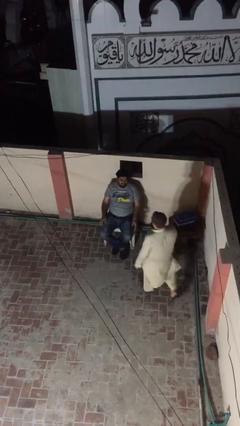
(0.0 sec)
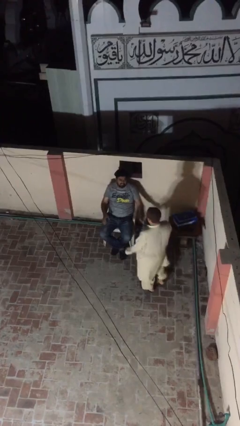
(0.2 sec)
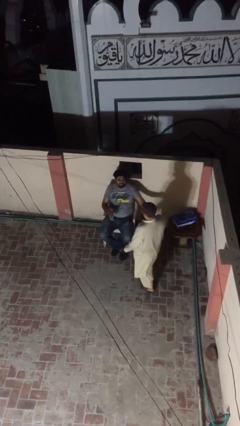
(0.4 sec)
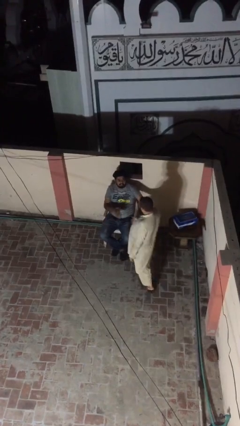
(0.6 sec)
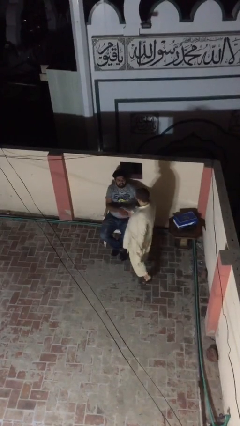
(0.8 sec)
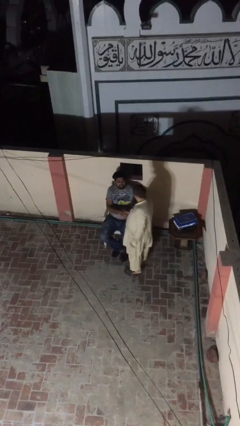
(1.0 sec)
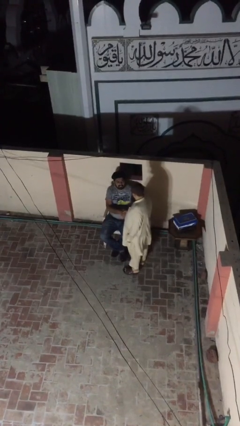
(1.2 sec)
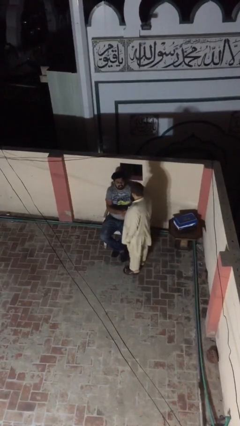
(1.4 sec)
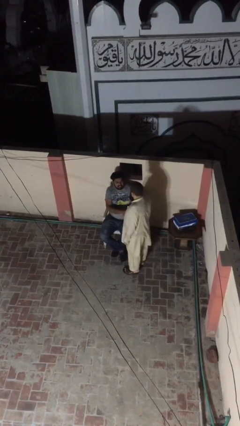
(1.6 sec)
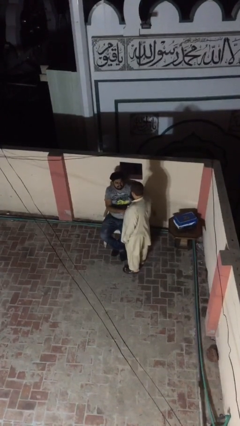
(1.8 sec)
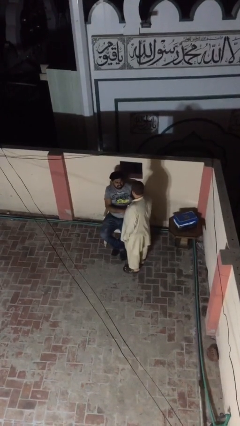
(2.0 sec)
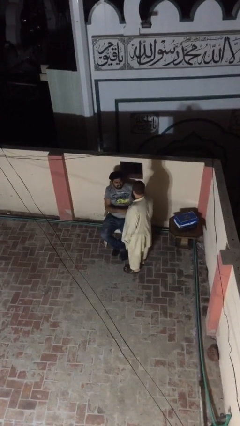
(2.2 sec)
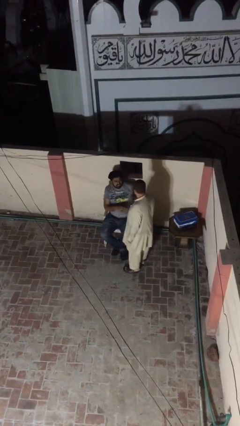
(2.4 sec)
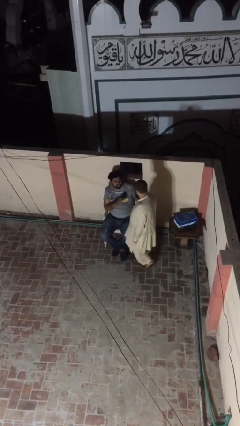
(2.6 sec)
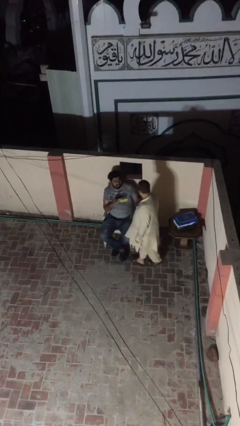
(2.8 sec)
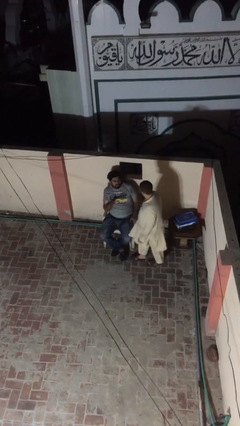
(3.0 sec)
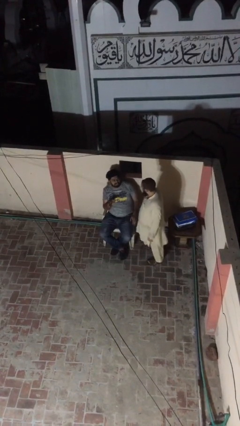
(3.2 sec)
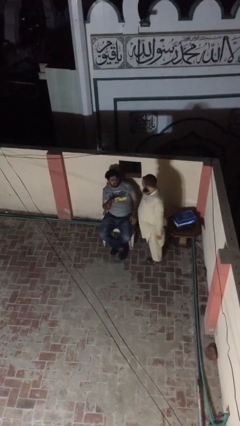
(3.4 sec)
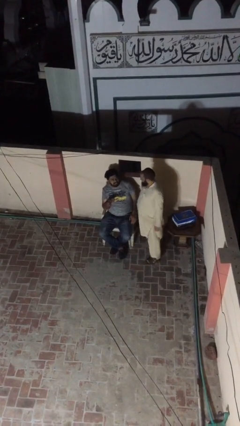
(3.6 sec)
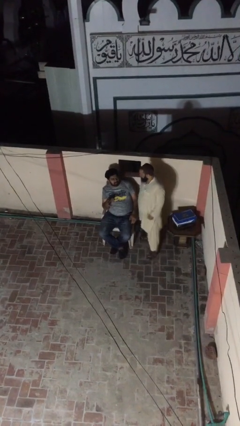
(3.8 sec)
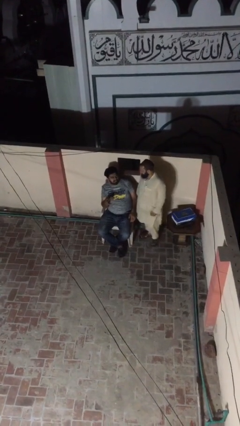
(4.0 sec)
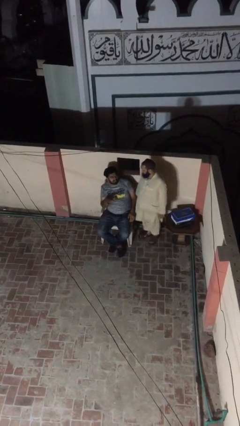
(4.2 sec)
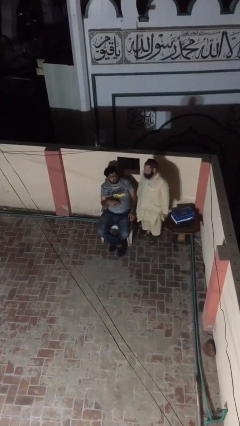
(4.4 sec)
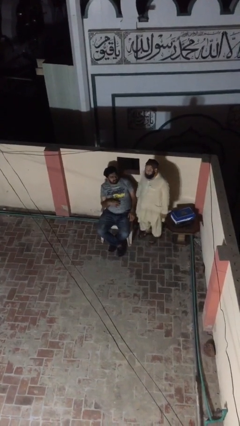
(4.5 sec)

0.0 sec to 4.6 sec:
person shakes hand

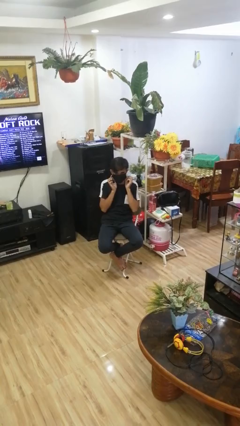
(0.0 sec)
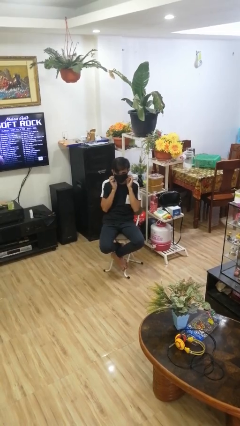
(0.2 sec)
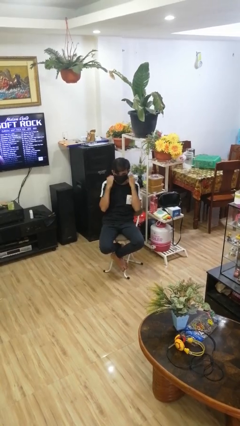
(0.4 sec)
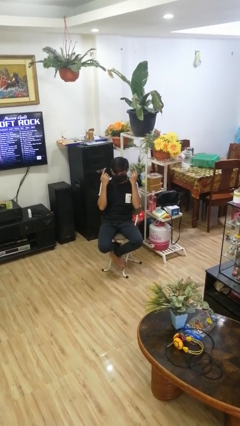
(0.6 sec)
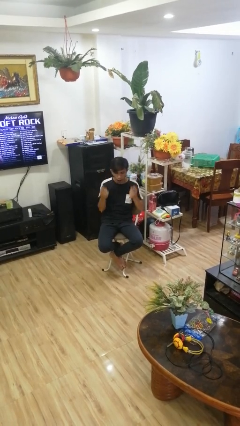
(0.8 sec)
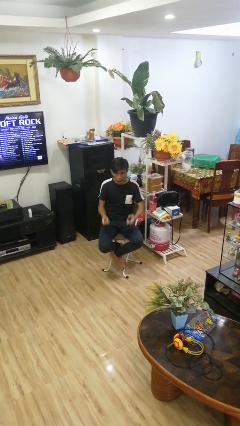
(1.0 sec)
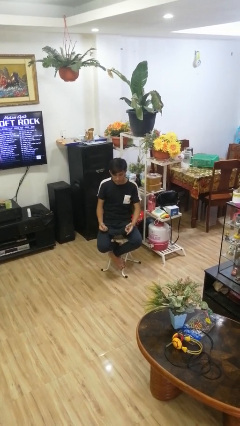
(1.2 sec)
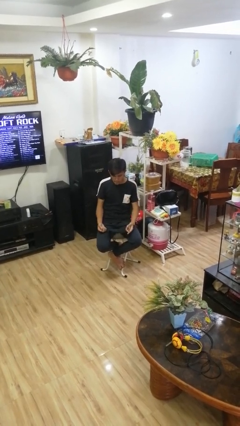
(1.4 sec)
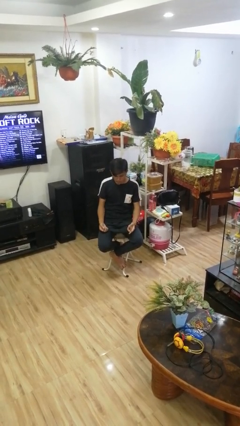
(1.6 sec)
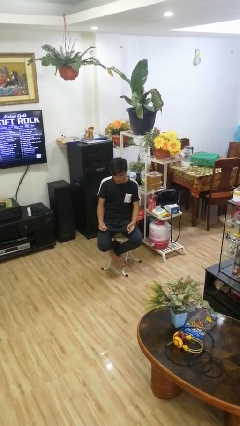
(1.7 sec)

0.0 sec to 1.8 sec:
person takes off facemask

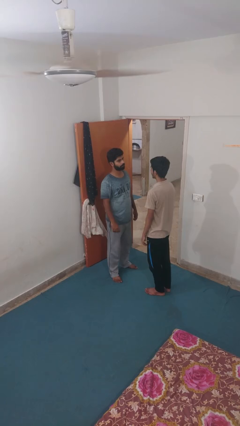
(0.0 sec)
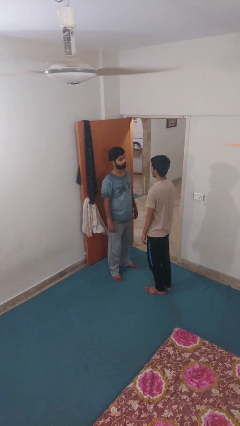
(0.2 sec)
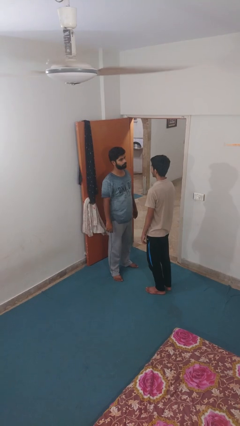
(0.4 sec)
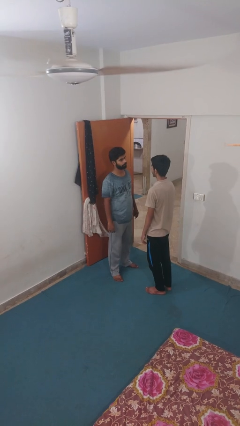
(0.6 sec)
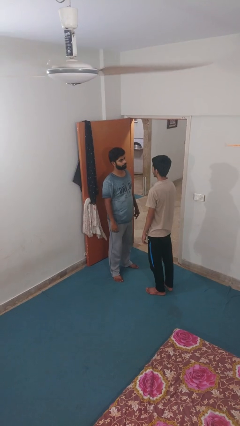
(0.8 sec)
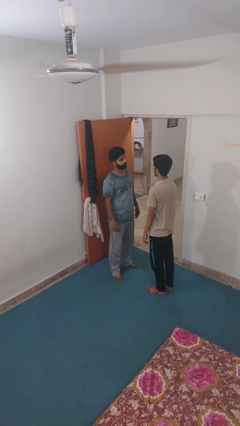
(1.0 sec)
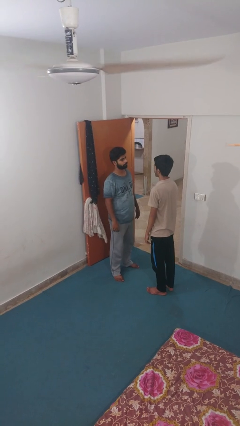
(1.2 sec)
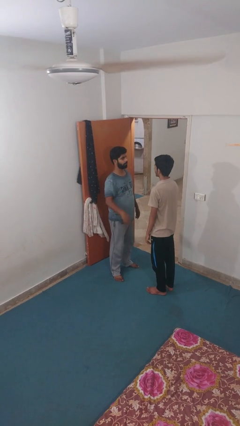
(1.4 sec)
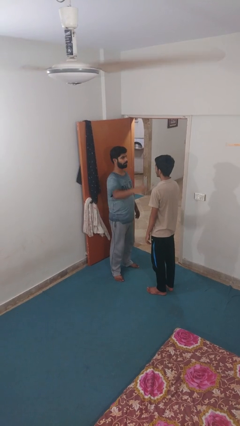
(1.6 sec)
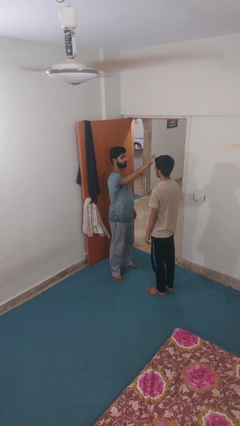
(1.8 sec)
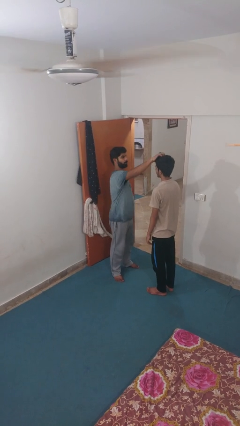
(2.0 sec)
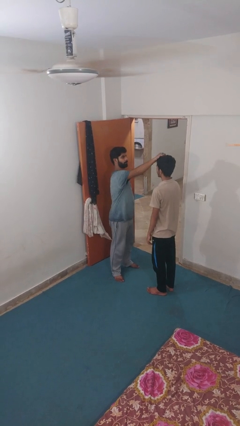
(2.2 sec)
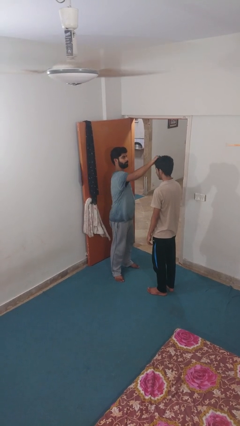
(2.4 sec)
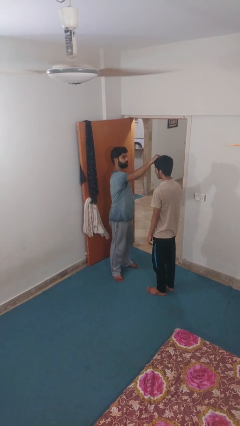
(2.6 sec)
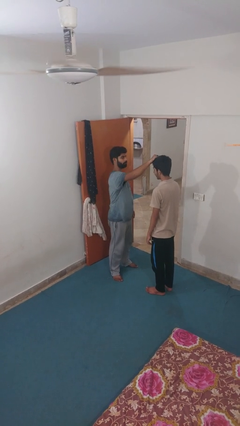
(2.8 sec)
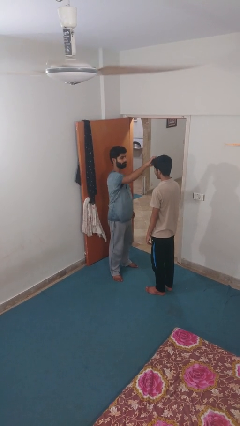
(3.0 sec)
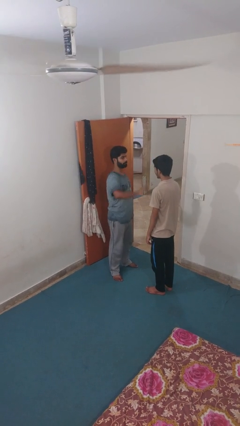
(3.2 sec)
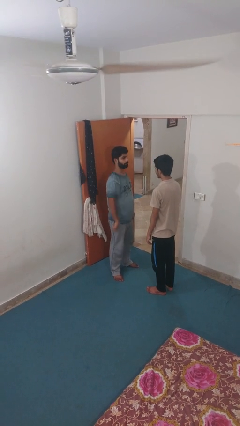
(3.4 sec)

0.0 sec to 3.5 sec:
person grabs person by hair

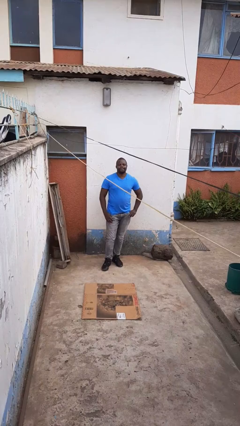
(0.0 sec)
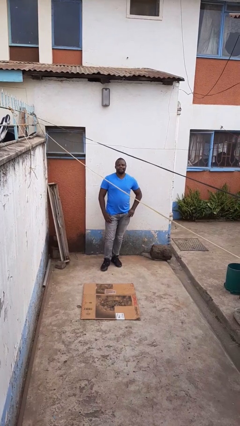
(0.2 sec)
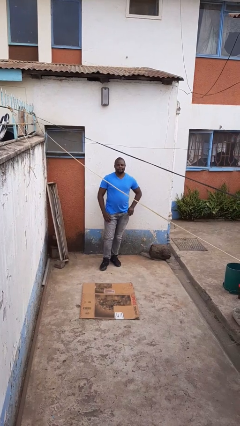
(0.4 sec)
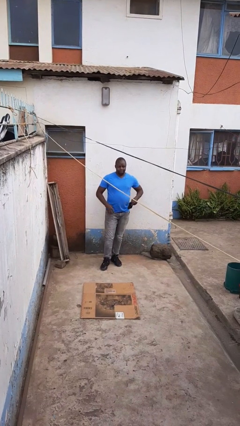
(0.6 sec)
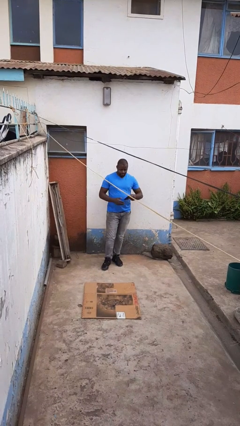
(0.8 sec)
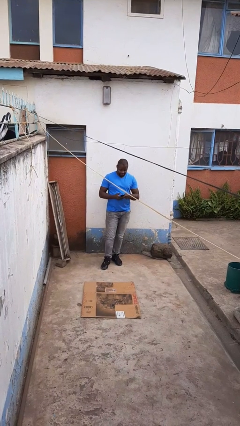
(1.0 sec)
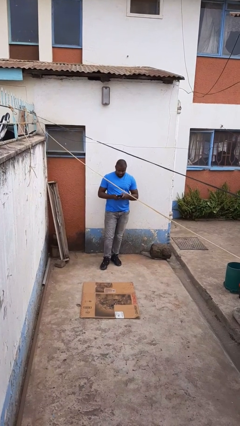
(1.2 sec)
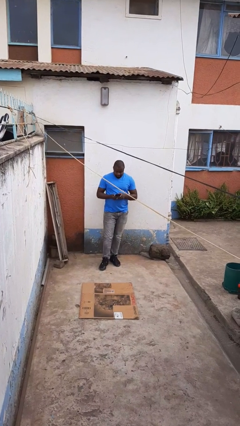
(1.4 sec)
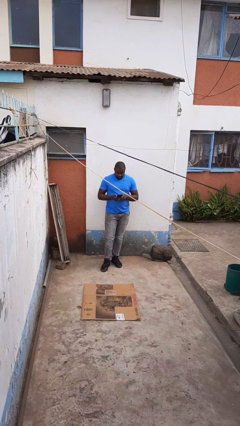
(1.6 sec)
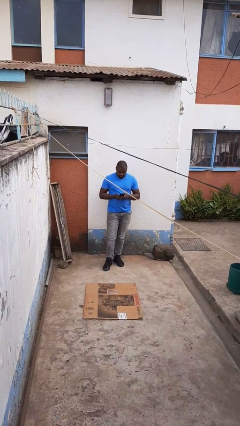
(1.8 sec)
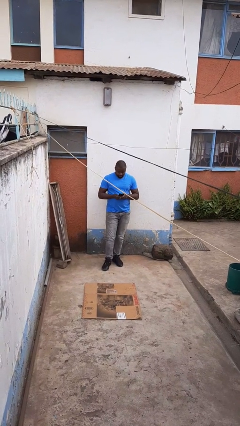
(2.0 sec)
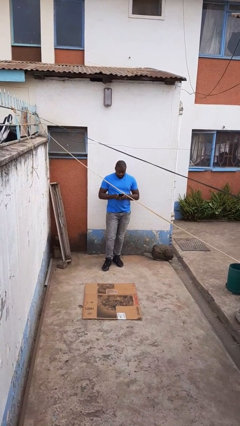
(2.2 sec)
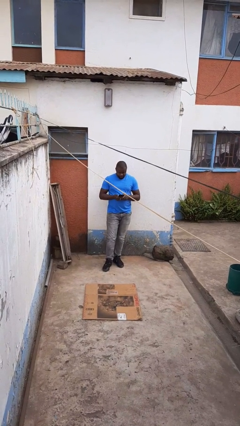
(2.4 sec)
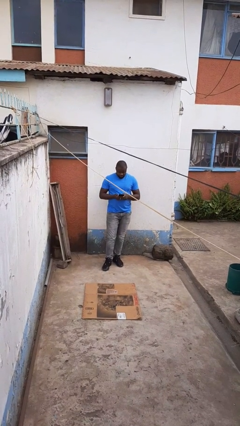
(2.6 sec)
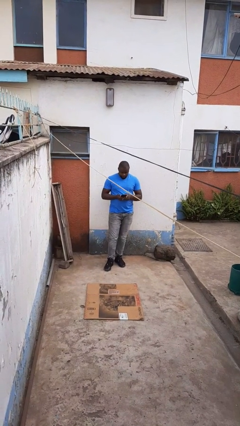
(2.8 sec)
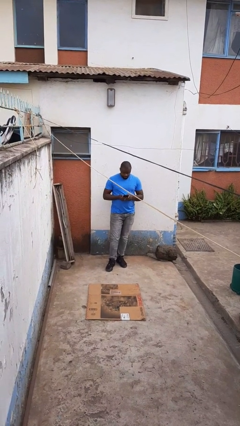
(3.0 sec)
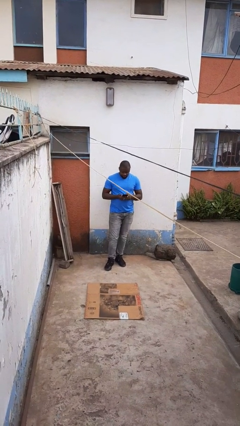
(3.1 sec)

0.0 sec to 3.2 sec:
person takes phone from pocket

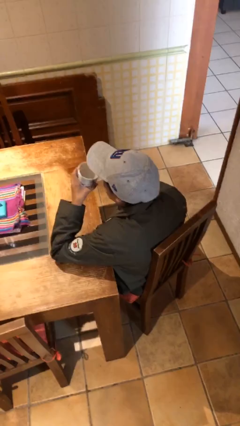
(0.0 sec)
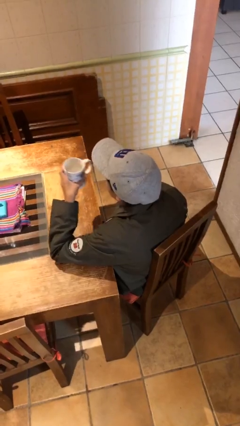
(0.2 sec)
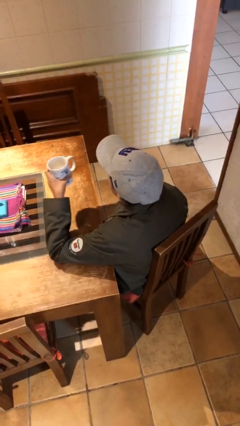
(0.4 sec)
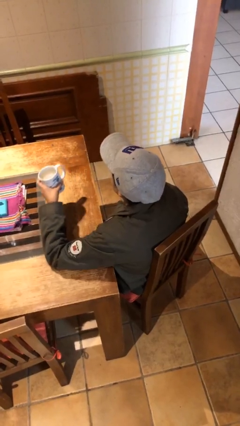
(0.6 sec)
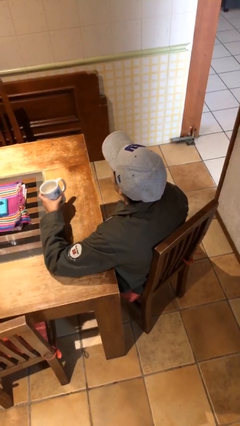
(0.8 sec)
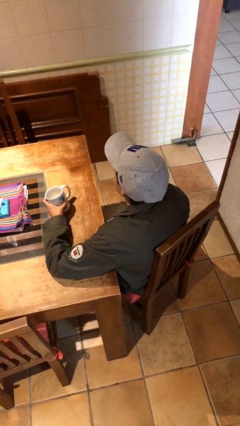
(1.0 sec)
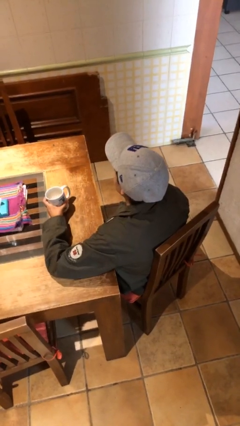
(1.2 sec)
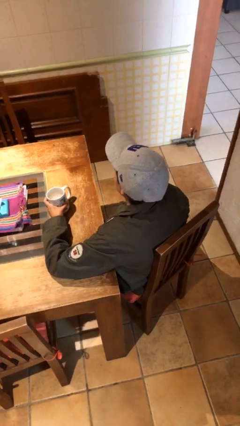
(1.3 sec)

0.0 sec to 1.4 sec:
person puts down object on table

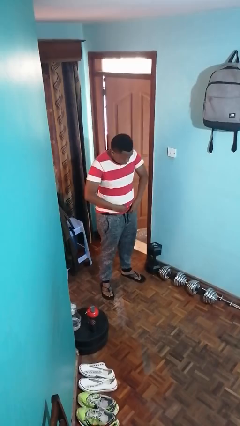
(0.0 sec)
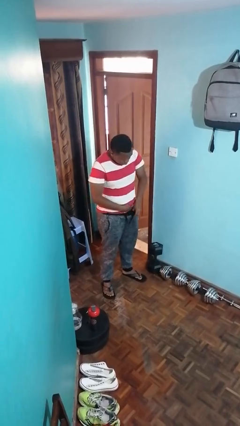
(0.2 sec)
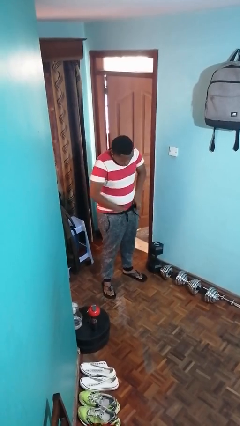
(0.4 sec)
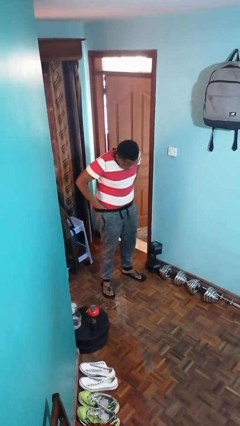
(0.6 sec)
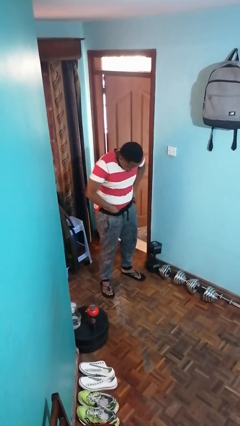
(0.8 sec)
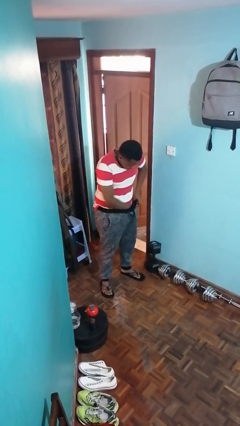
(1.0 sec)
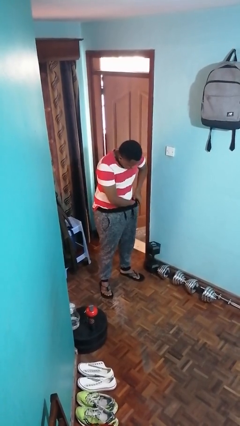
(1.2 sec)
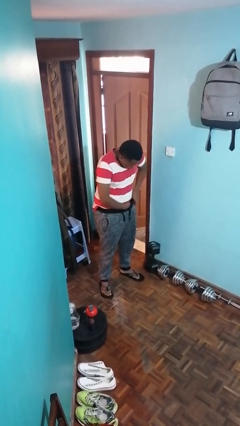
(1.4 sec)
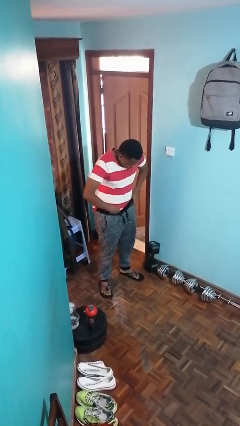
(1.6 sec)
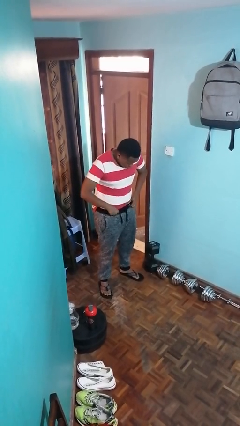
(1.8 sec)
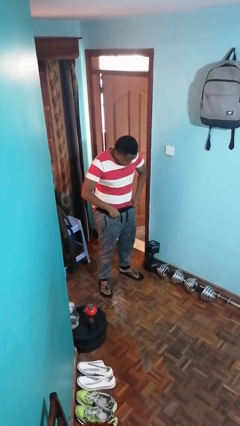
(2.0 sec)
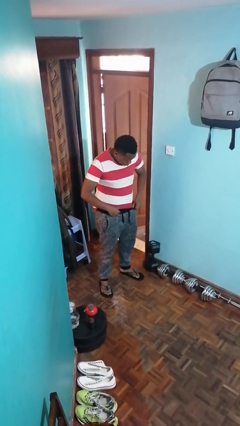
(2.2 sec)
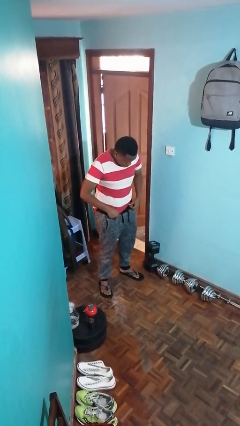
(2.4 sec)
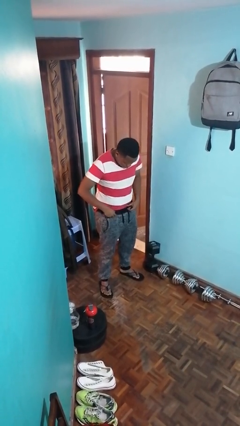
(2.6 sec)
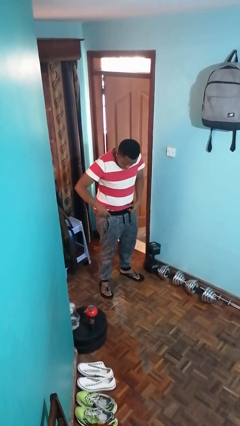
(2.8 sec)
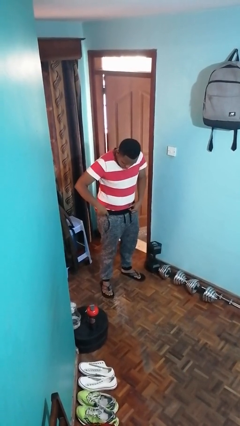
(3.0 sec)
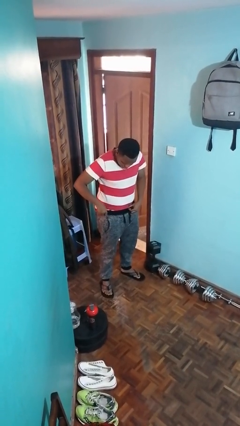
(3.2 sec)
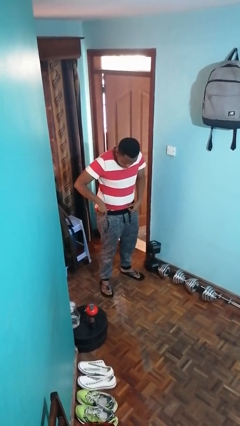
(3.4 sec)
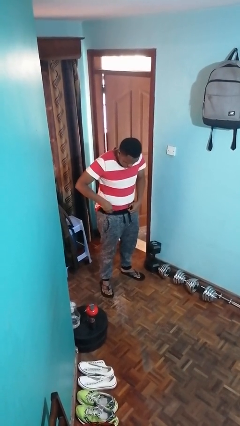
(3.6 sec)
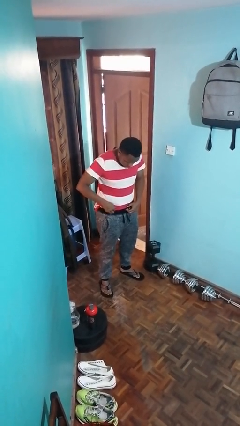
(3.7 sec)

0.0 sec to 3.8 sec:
person tucks in shirt
